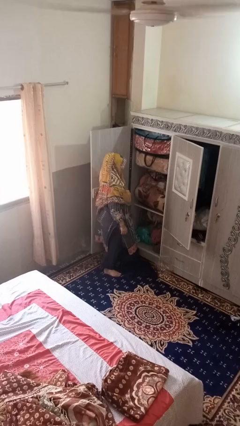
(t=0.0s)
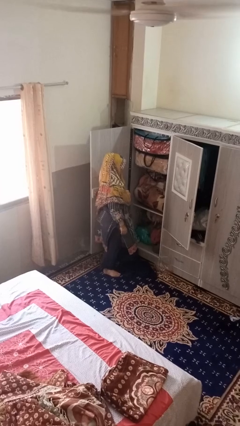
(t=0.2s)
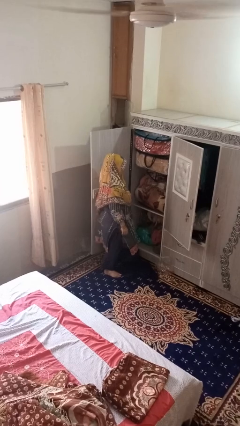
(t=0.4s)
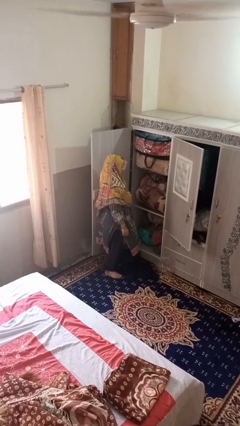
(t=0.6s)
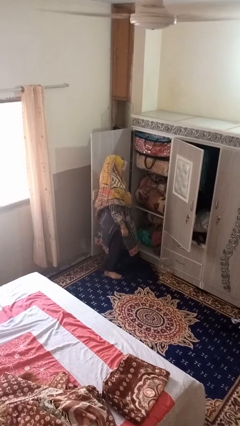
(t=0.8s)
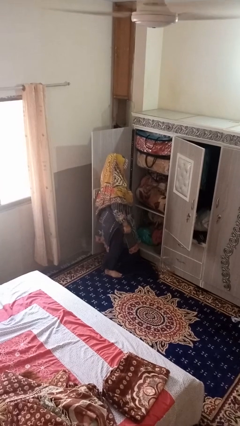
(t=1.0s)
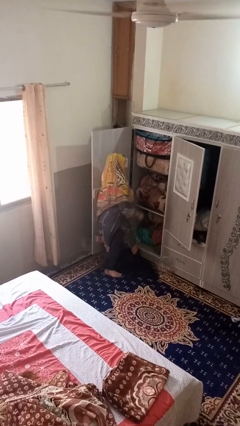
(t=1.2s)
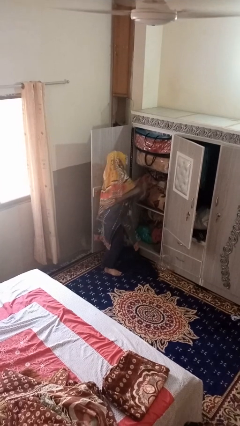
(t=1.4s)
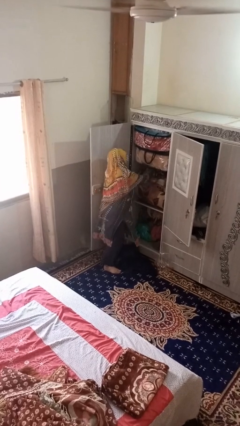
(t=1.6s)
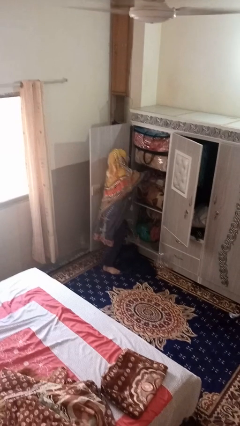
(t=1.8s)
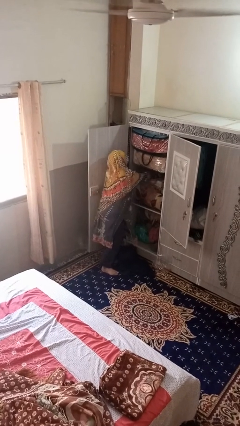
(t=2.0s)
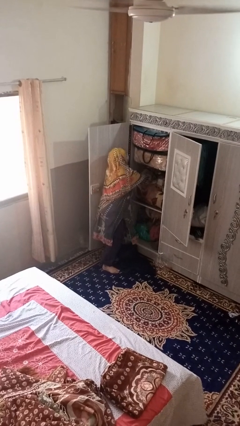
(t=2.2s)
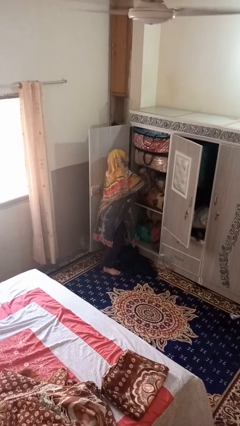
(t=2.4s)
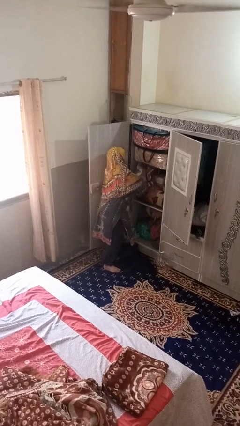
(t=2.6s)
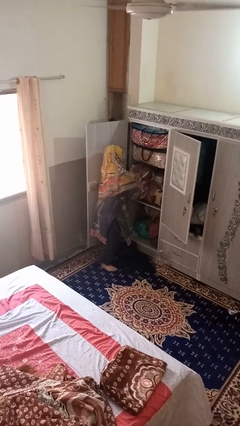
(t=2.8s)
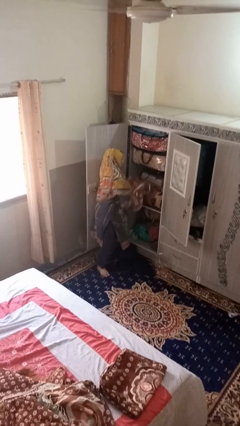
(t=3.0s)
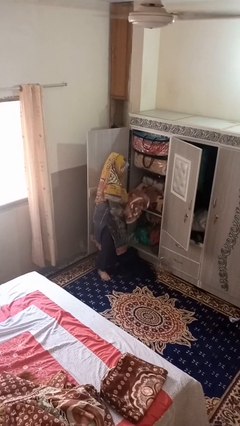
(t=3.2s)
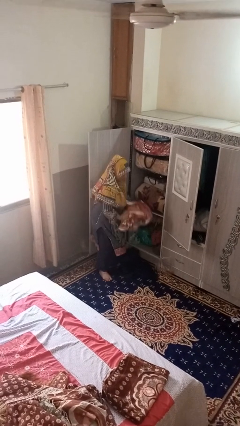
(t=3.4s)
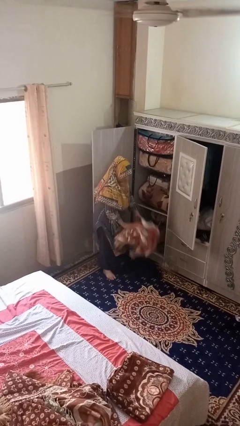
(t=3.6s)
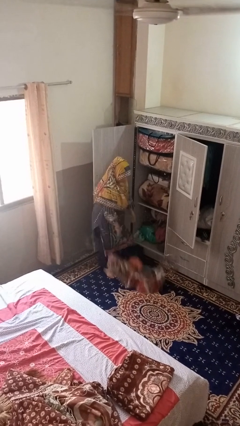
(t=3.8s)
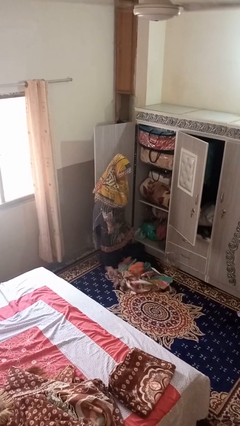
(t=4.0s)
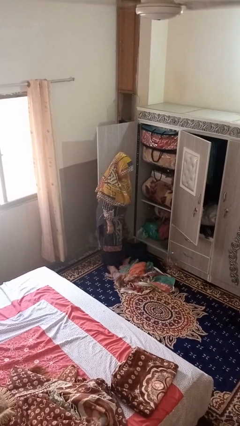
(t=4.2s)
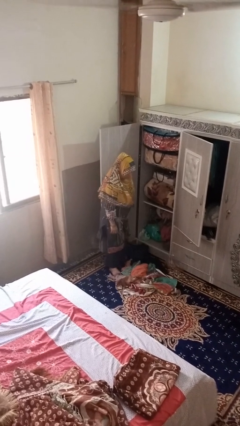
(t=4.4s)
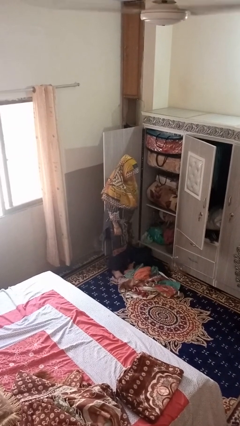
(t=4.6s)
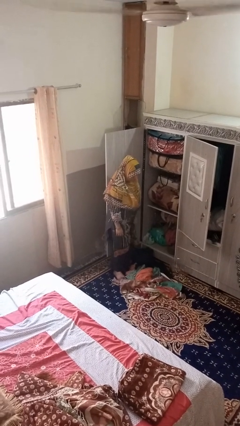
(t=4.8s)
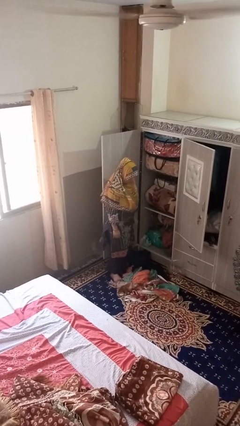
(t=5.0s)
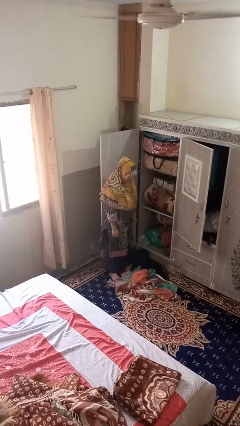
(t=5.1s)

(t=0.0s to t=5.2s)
person puts clothes into dresser

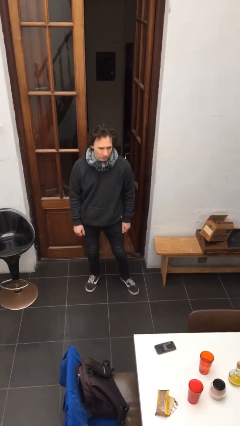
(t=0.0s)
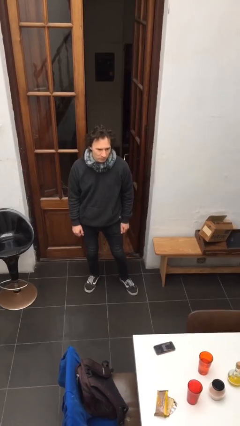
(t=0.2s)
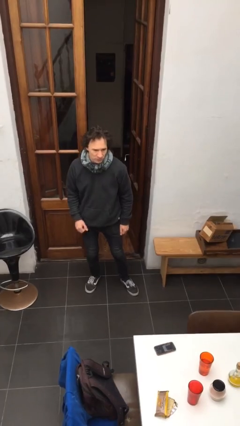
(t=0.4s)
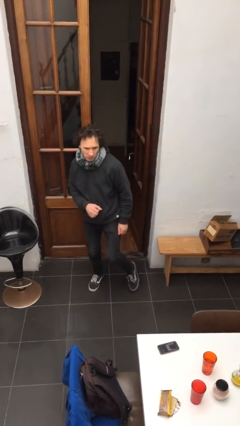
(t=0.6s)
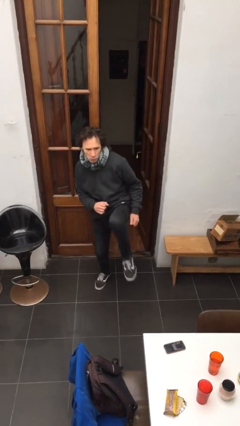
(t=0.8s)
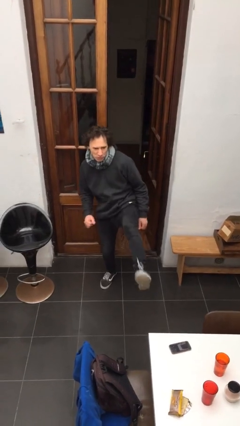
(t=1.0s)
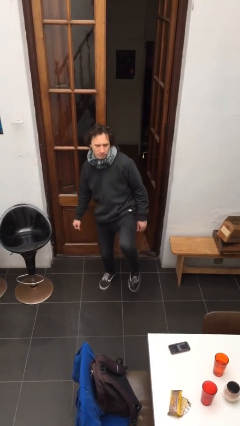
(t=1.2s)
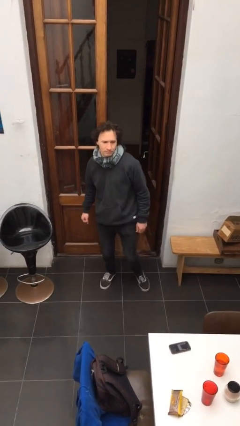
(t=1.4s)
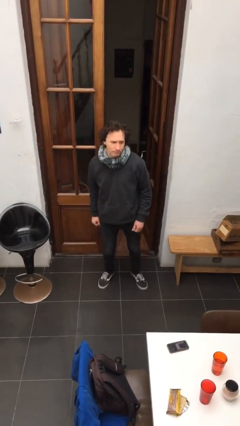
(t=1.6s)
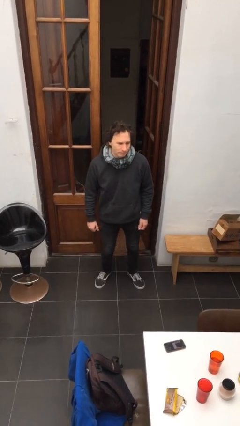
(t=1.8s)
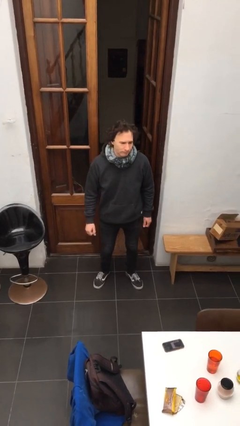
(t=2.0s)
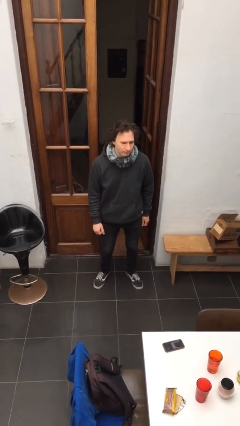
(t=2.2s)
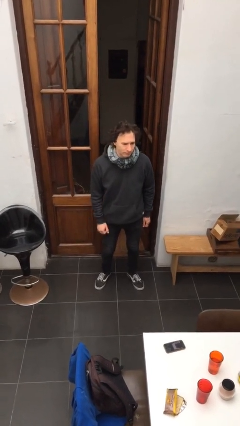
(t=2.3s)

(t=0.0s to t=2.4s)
person karate kicks

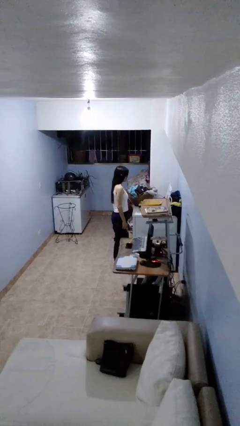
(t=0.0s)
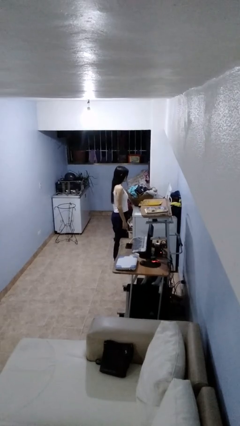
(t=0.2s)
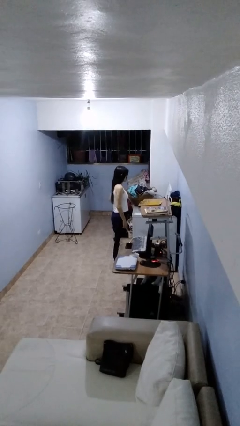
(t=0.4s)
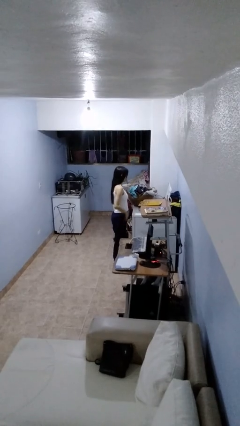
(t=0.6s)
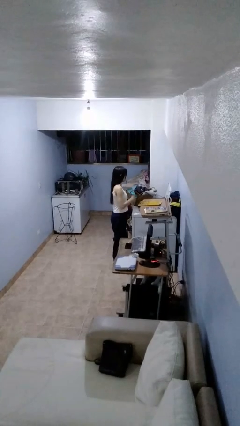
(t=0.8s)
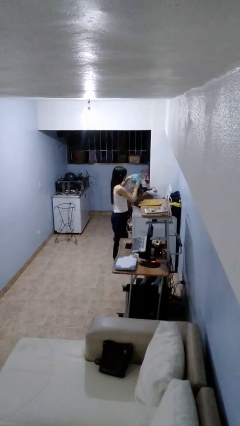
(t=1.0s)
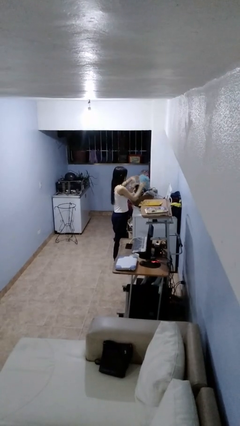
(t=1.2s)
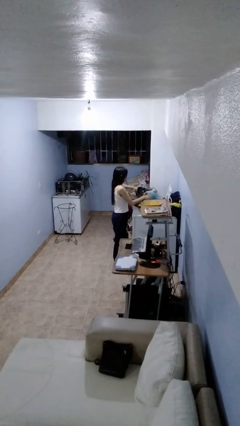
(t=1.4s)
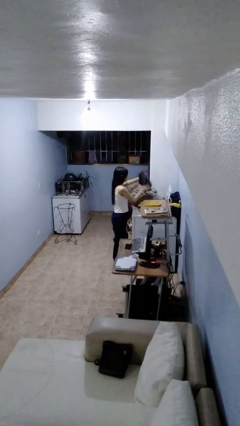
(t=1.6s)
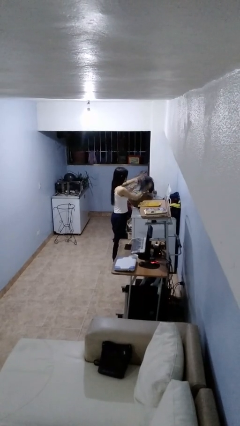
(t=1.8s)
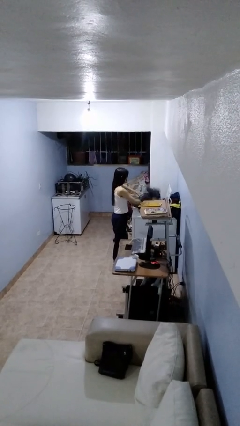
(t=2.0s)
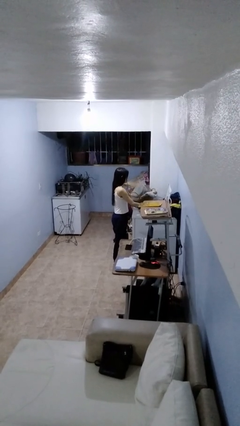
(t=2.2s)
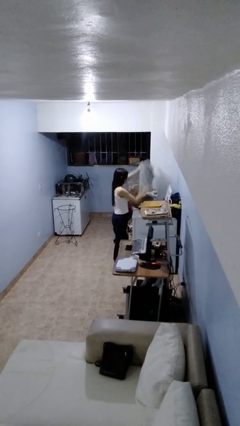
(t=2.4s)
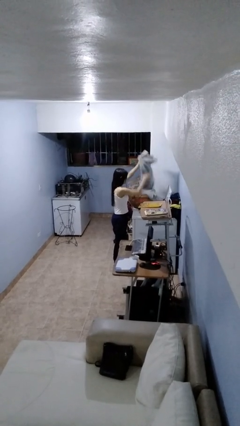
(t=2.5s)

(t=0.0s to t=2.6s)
person loads clotheswasher

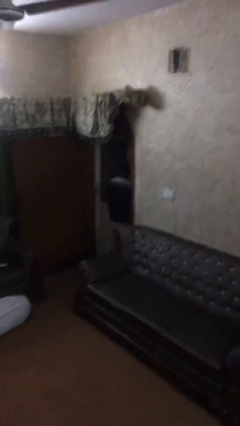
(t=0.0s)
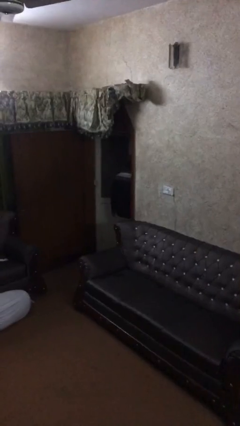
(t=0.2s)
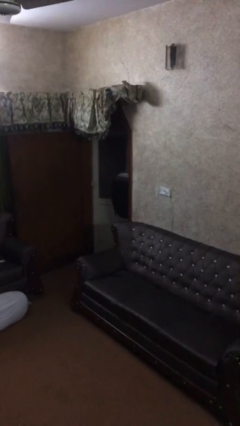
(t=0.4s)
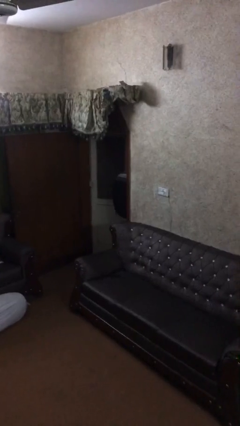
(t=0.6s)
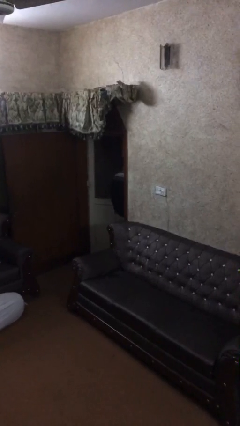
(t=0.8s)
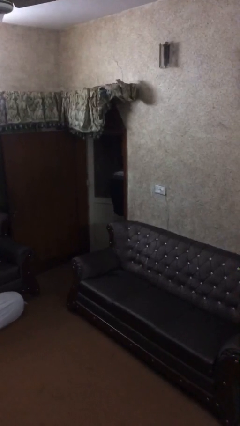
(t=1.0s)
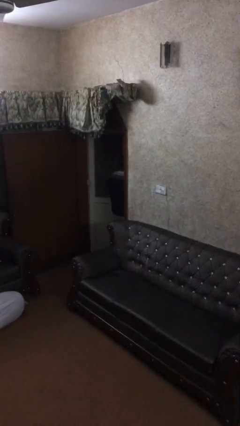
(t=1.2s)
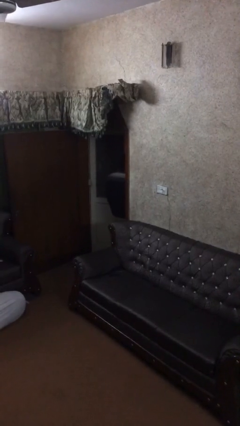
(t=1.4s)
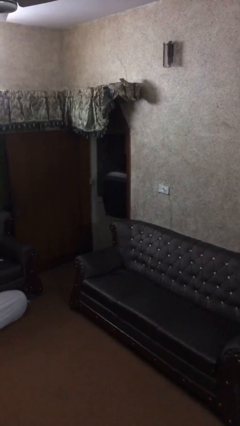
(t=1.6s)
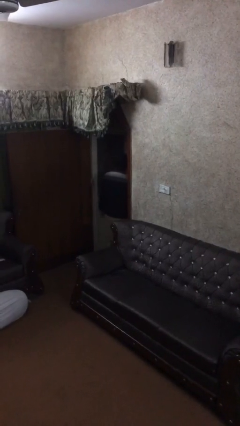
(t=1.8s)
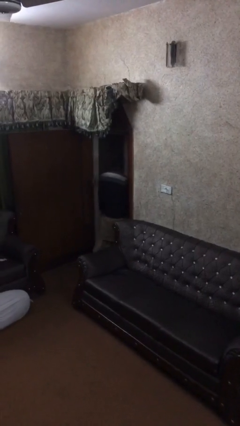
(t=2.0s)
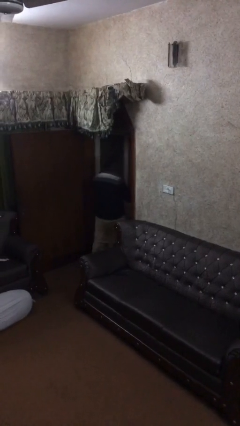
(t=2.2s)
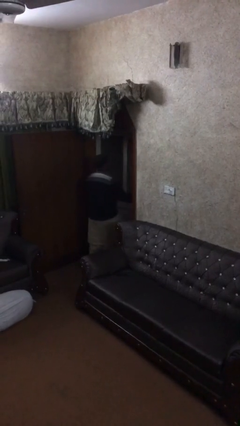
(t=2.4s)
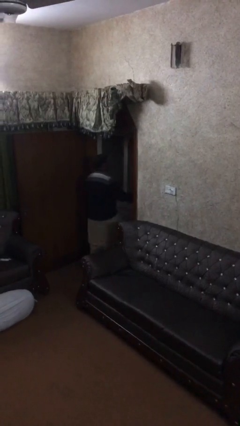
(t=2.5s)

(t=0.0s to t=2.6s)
person opens facility door

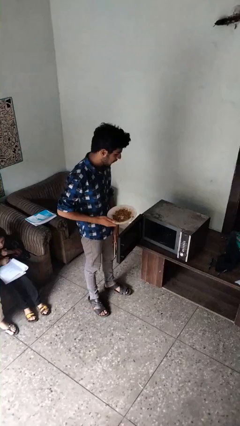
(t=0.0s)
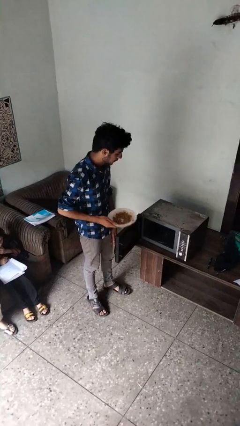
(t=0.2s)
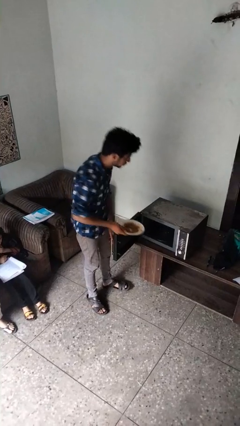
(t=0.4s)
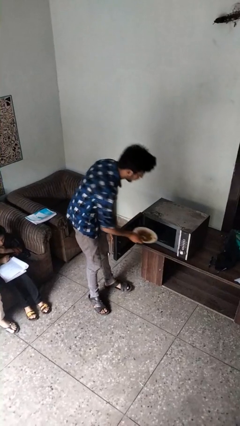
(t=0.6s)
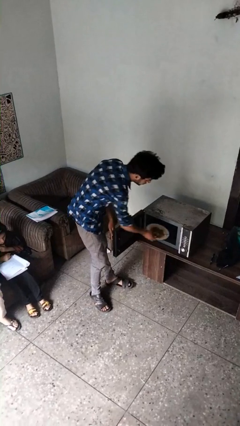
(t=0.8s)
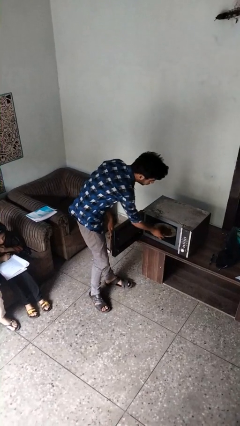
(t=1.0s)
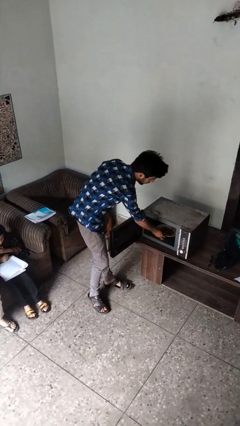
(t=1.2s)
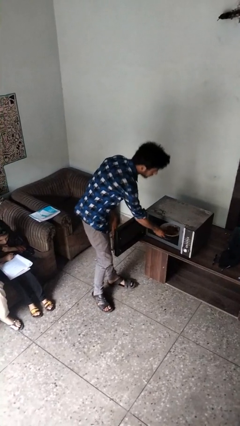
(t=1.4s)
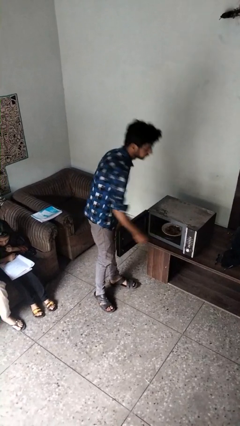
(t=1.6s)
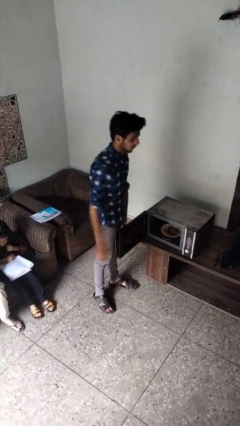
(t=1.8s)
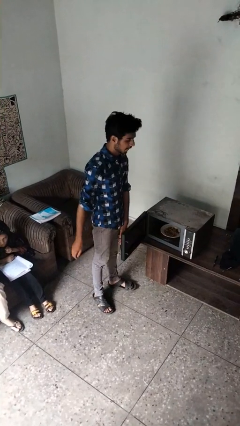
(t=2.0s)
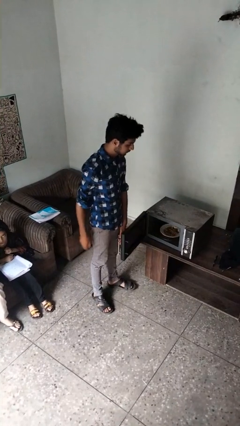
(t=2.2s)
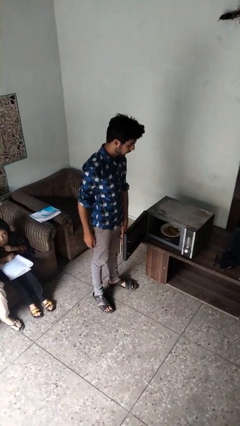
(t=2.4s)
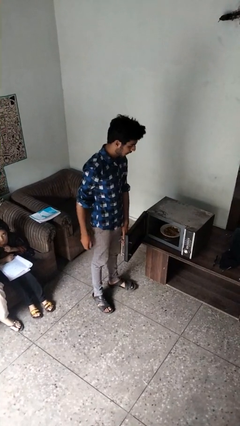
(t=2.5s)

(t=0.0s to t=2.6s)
person puts object into microwave

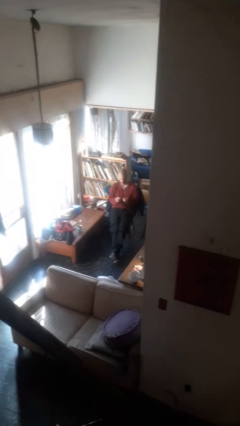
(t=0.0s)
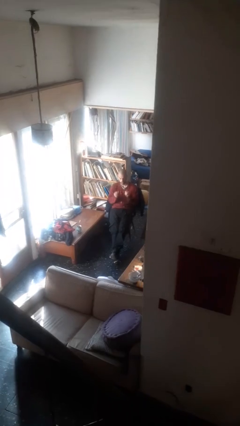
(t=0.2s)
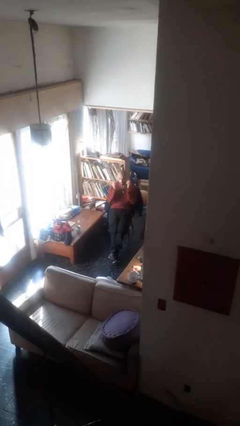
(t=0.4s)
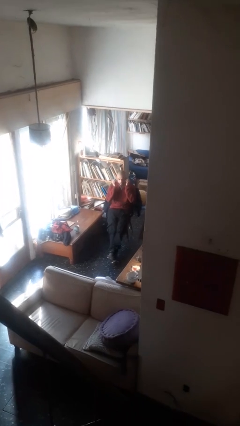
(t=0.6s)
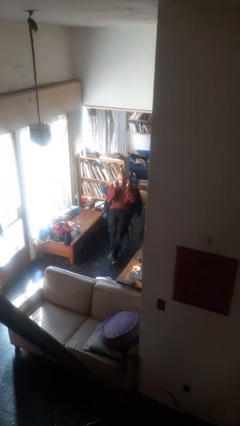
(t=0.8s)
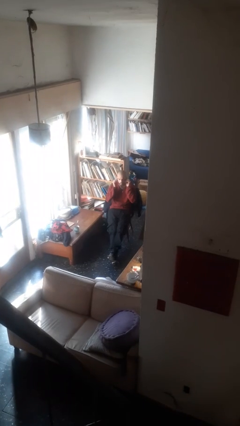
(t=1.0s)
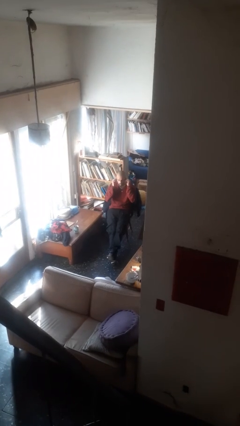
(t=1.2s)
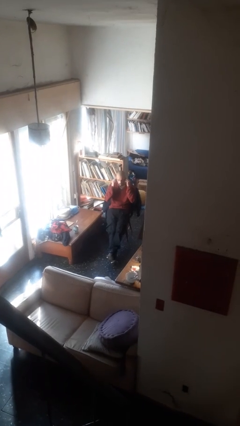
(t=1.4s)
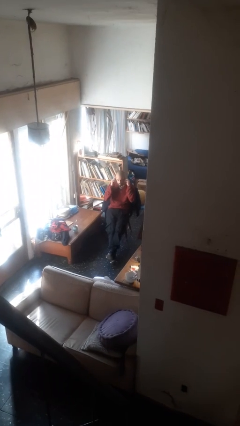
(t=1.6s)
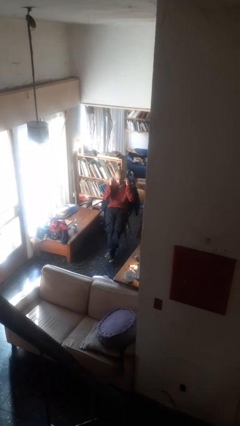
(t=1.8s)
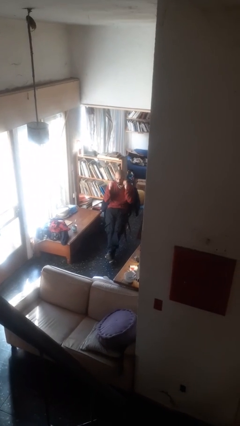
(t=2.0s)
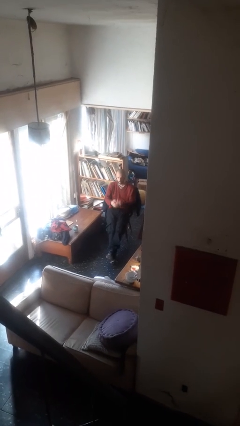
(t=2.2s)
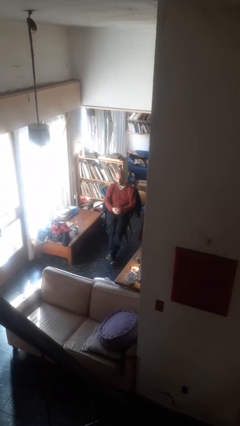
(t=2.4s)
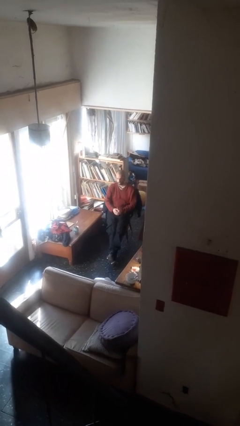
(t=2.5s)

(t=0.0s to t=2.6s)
person puts on headphones
